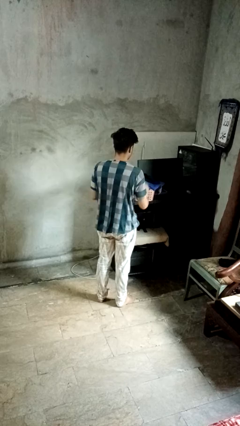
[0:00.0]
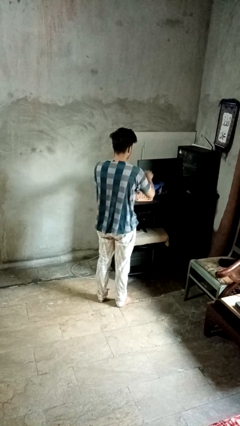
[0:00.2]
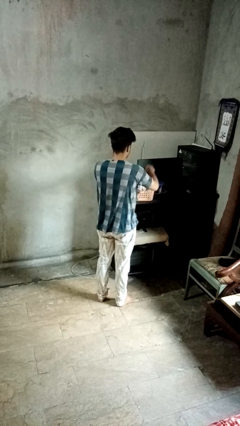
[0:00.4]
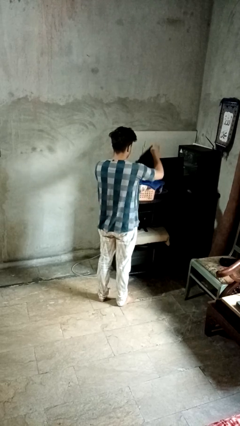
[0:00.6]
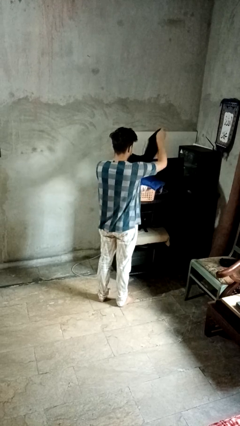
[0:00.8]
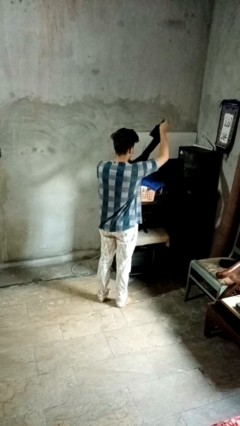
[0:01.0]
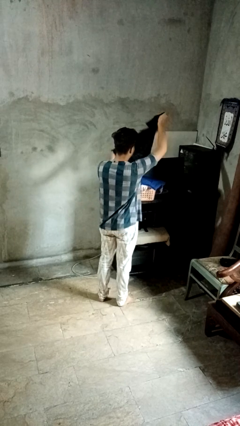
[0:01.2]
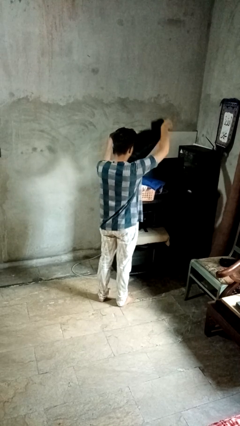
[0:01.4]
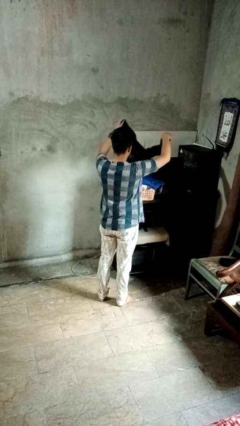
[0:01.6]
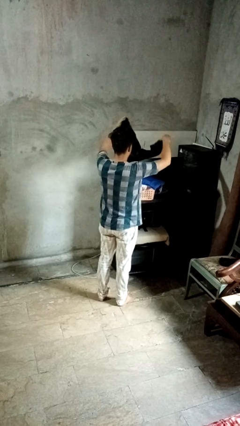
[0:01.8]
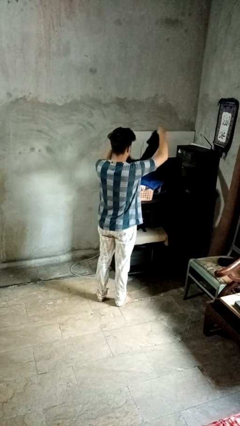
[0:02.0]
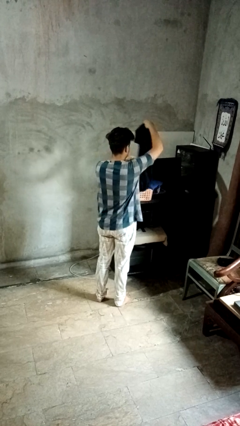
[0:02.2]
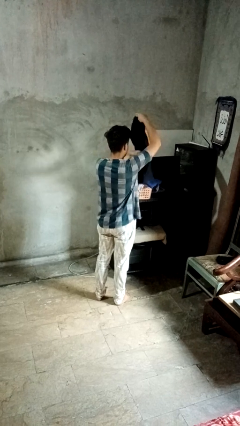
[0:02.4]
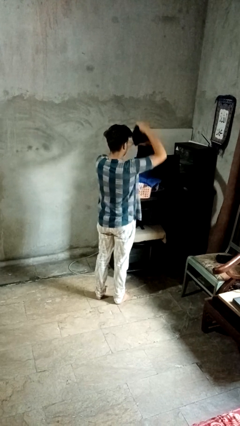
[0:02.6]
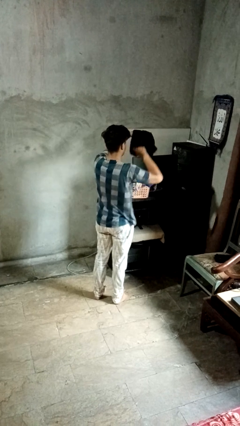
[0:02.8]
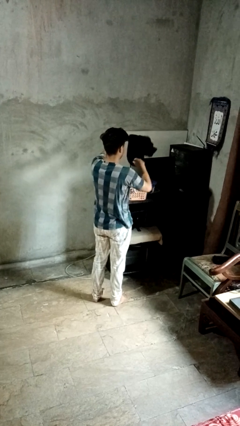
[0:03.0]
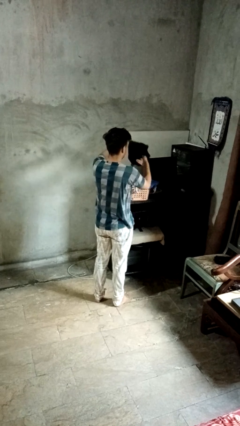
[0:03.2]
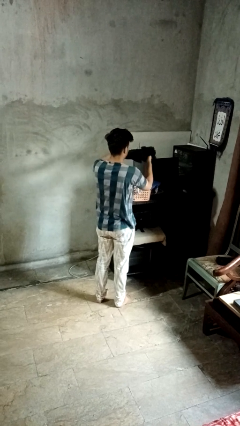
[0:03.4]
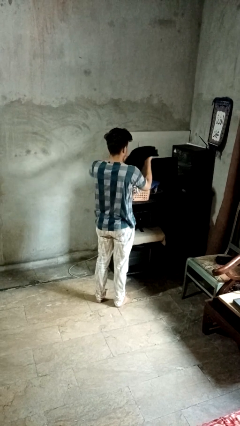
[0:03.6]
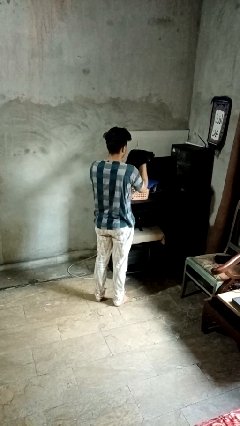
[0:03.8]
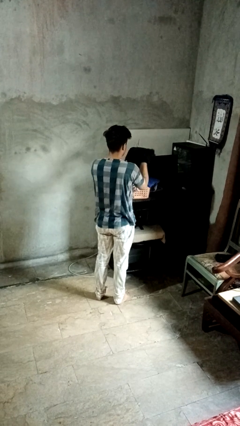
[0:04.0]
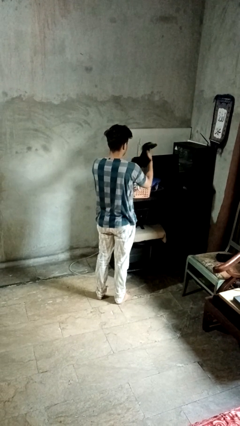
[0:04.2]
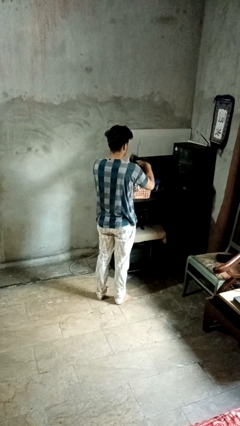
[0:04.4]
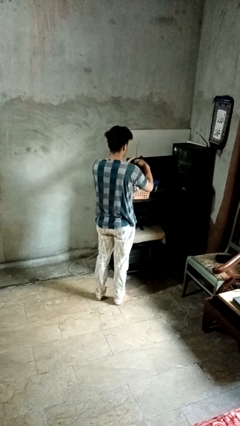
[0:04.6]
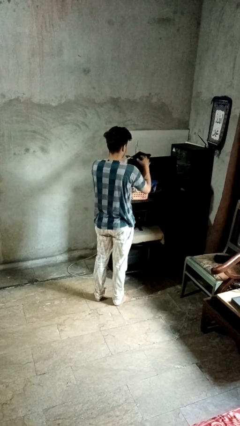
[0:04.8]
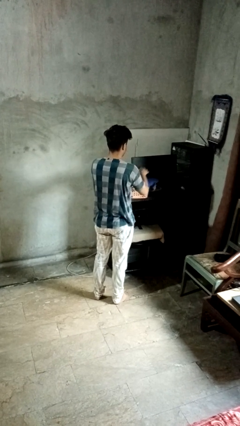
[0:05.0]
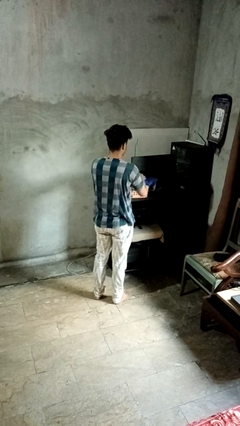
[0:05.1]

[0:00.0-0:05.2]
person folds shirt

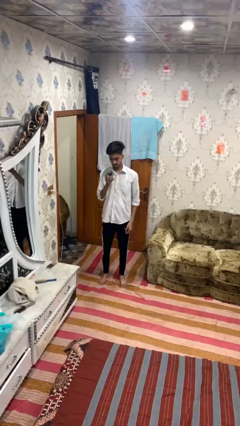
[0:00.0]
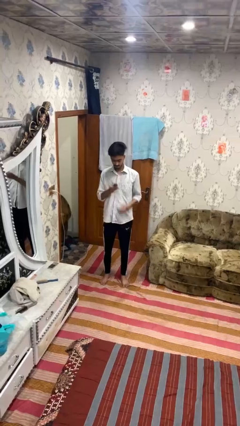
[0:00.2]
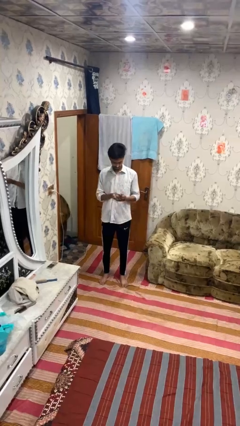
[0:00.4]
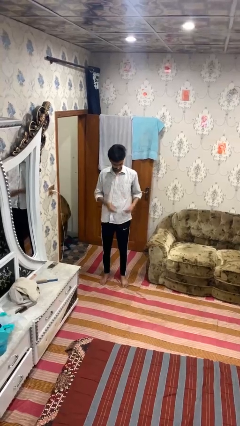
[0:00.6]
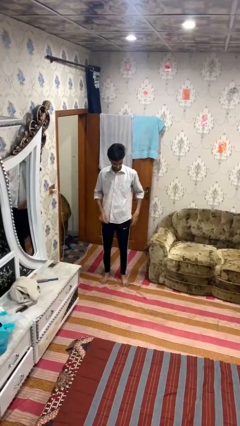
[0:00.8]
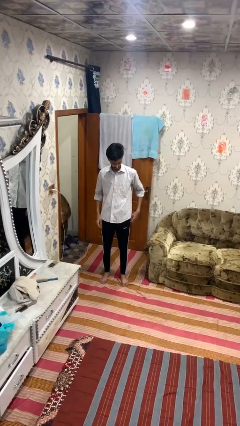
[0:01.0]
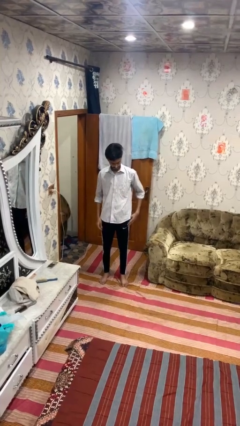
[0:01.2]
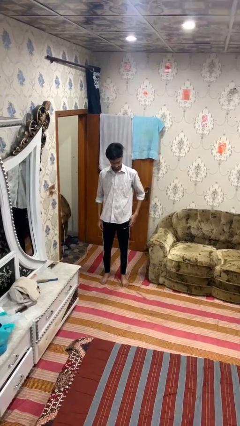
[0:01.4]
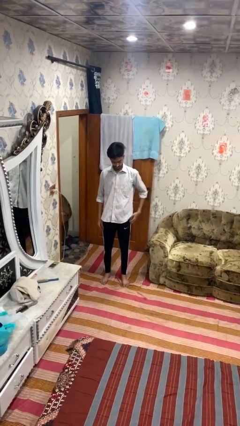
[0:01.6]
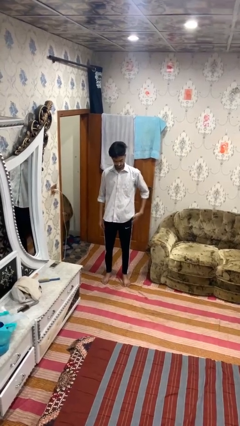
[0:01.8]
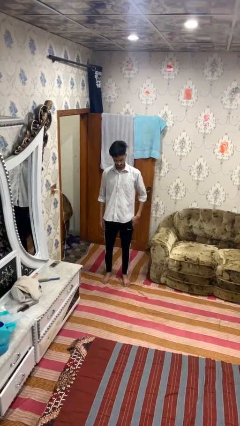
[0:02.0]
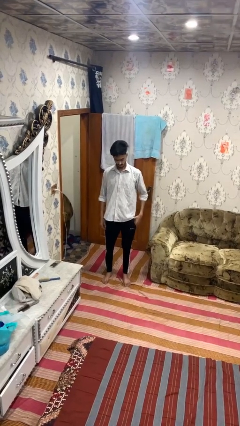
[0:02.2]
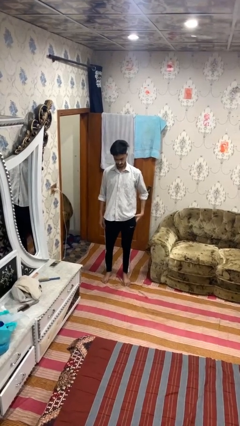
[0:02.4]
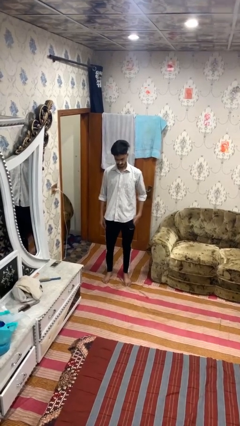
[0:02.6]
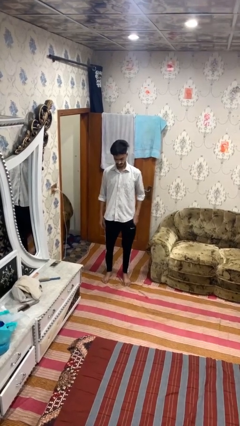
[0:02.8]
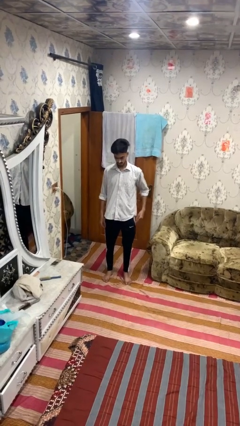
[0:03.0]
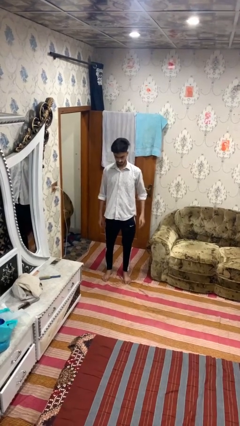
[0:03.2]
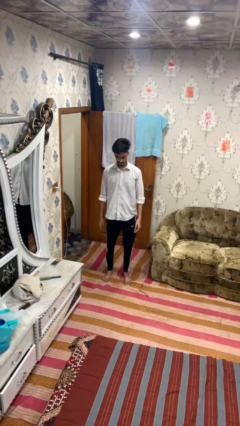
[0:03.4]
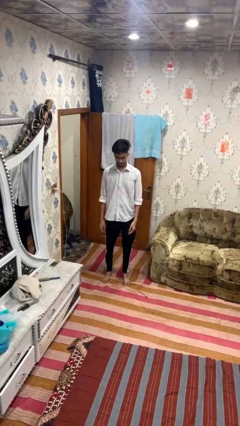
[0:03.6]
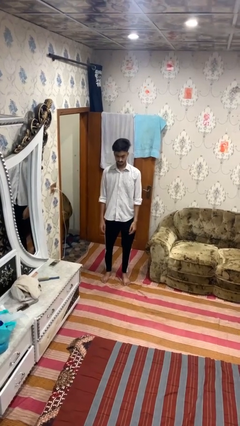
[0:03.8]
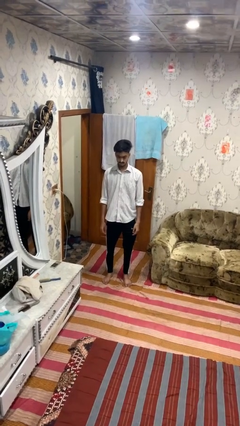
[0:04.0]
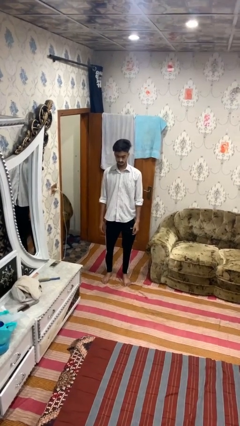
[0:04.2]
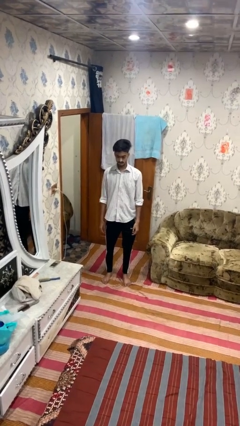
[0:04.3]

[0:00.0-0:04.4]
person puts phone into pocket

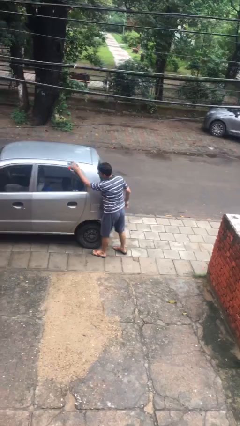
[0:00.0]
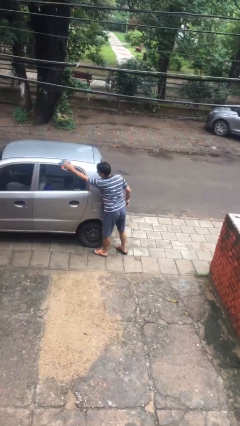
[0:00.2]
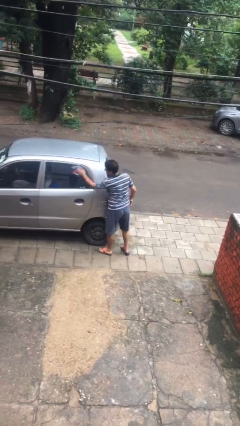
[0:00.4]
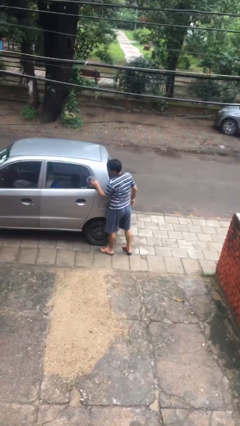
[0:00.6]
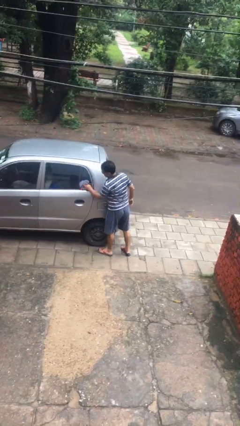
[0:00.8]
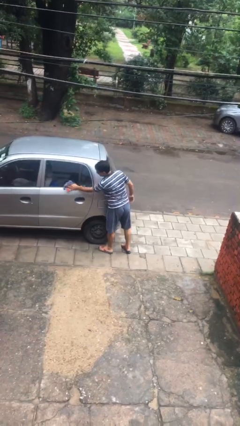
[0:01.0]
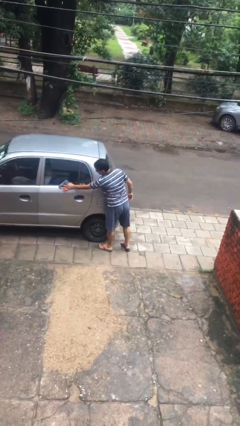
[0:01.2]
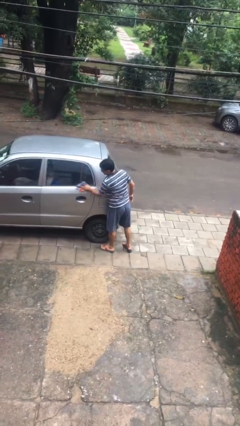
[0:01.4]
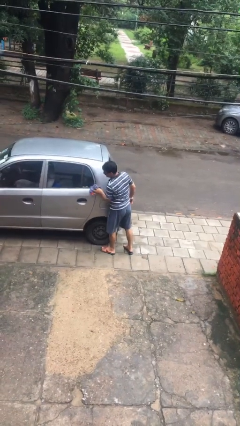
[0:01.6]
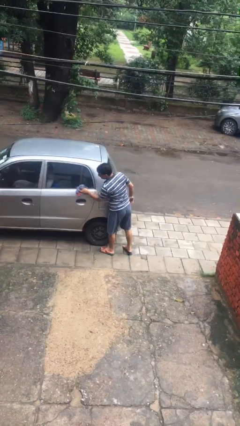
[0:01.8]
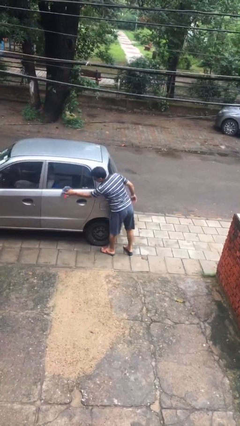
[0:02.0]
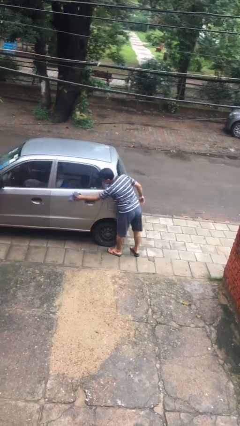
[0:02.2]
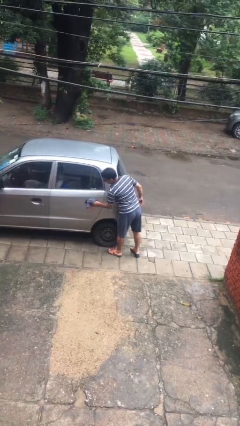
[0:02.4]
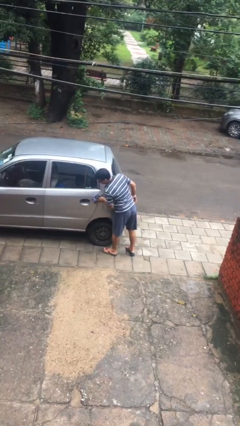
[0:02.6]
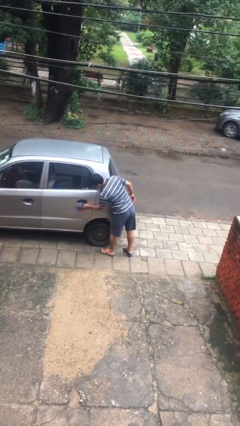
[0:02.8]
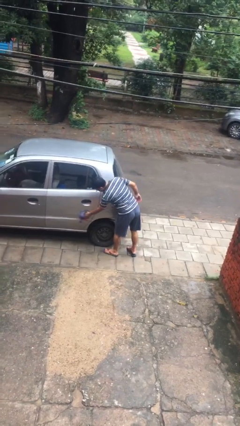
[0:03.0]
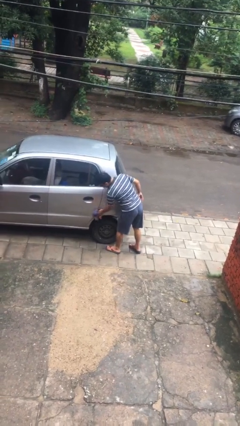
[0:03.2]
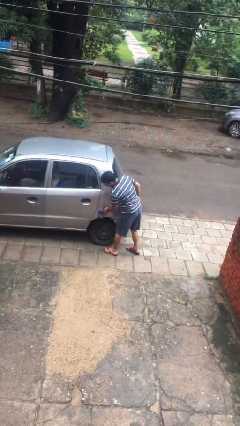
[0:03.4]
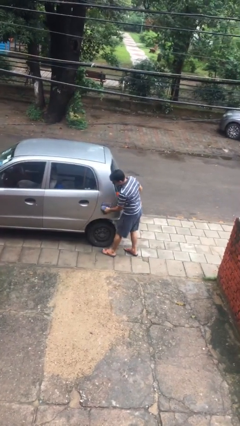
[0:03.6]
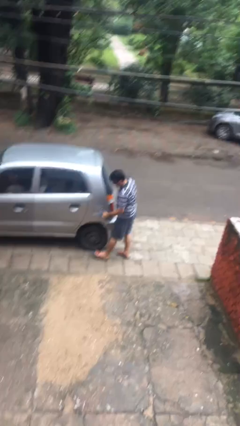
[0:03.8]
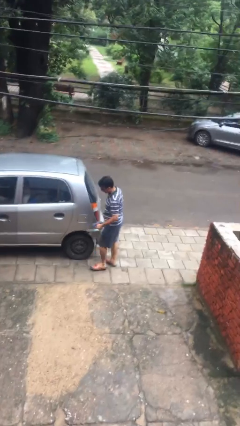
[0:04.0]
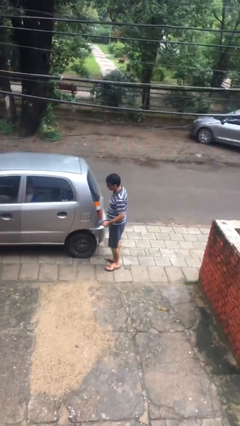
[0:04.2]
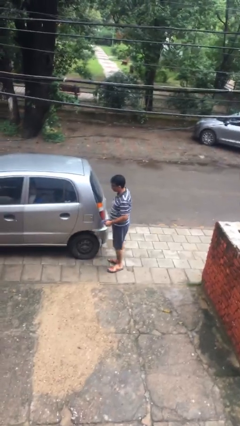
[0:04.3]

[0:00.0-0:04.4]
person polishes car with rag

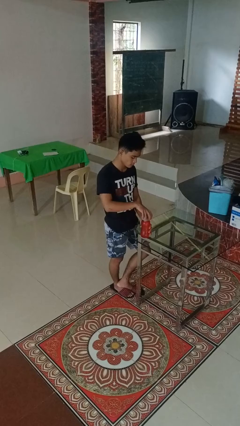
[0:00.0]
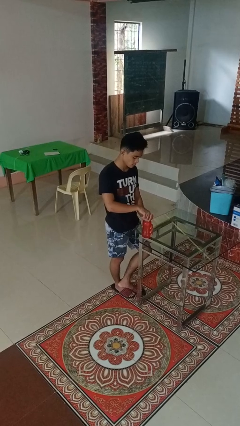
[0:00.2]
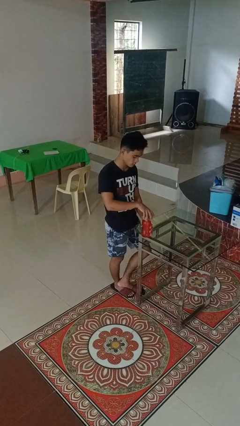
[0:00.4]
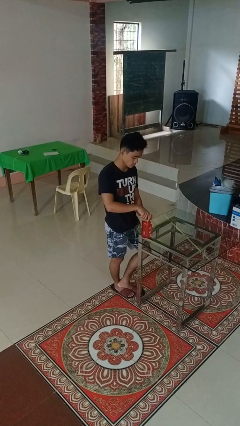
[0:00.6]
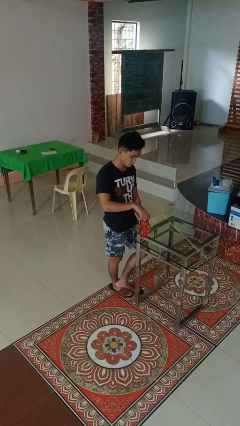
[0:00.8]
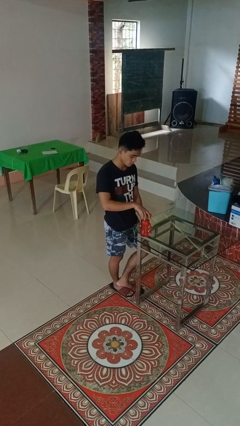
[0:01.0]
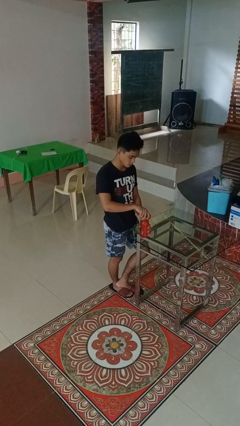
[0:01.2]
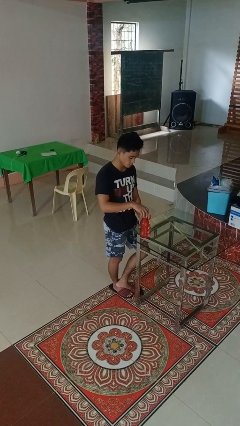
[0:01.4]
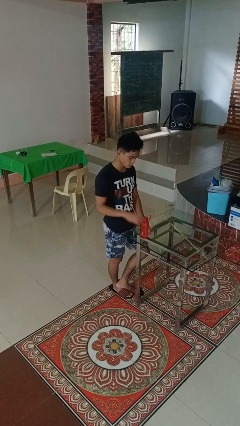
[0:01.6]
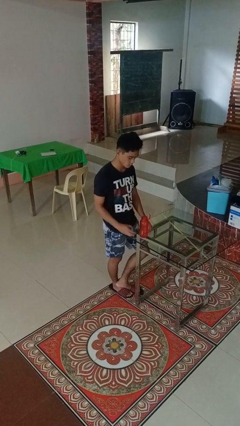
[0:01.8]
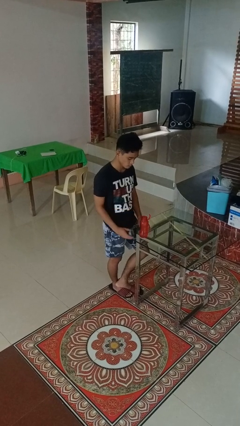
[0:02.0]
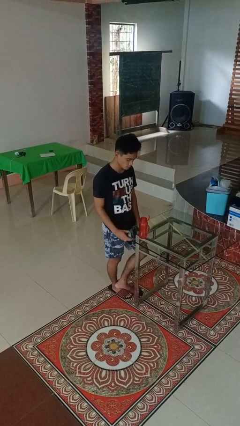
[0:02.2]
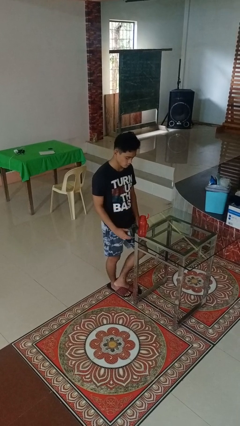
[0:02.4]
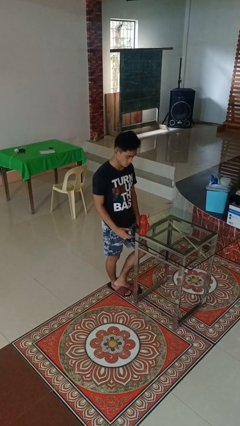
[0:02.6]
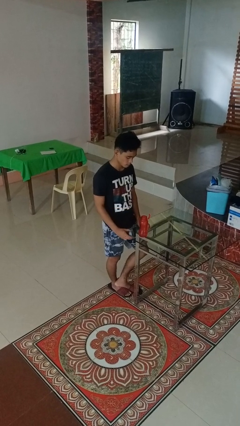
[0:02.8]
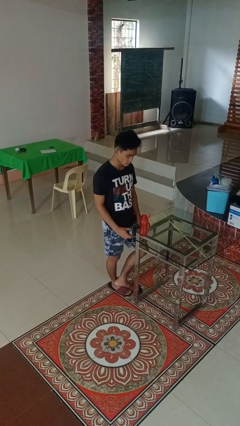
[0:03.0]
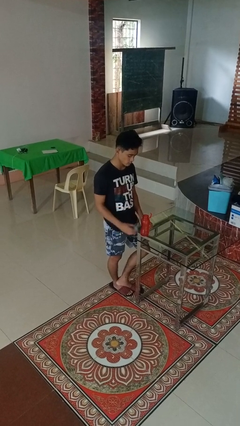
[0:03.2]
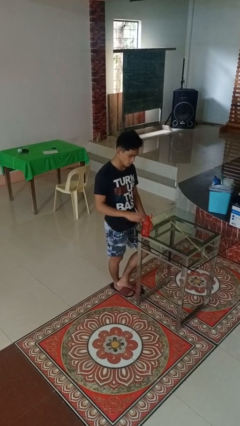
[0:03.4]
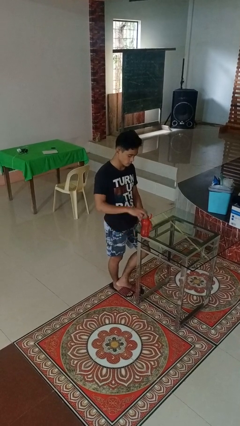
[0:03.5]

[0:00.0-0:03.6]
person unscrews lid from bottle
